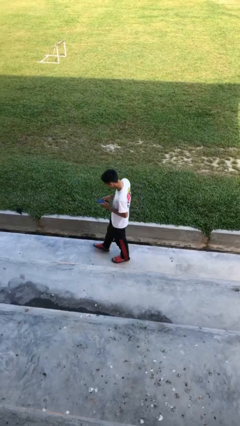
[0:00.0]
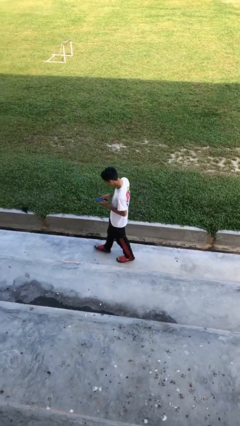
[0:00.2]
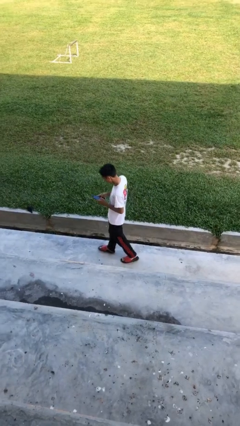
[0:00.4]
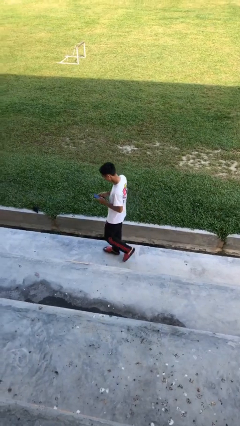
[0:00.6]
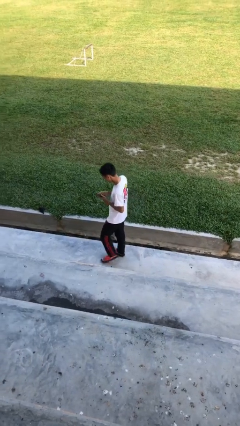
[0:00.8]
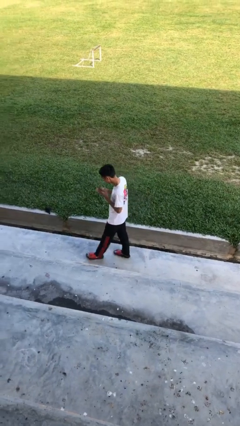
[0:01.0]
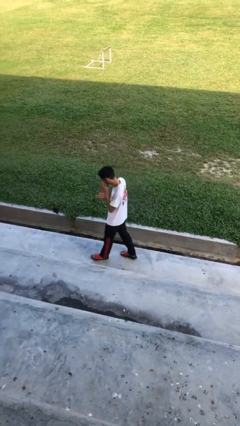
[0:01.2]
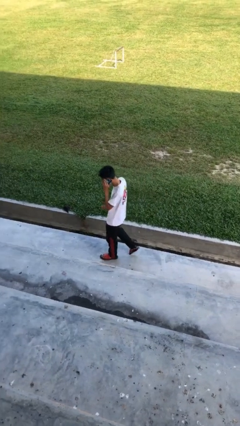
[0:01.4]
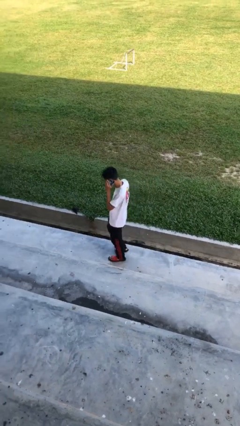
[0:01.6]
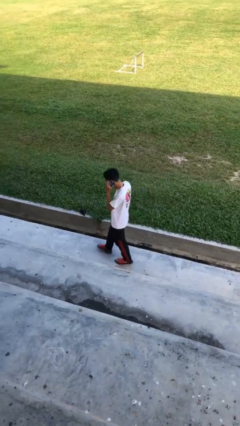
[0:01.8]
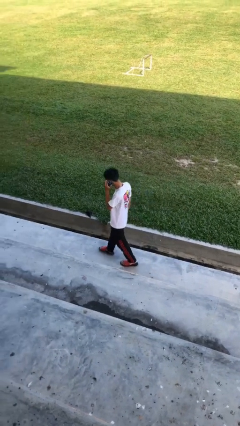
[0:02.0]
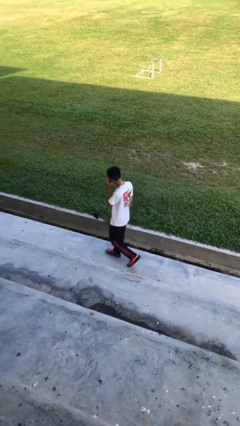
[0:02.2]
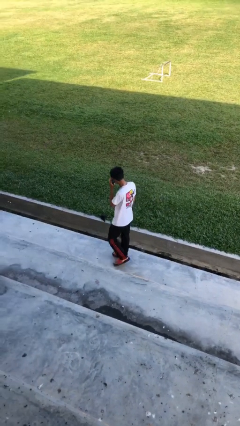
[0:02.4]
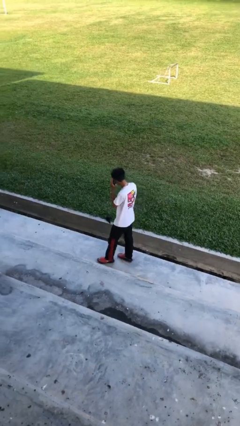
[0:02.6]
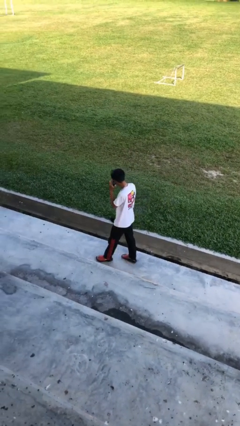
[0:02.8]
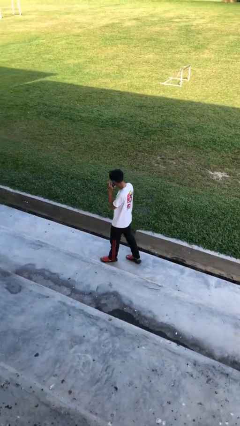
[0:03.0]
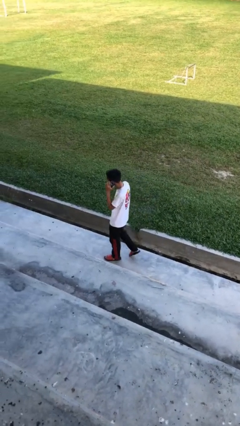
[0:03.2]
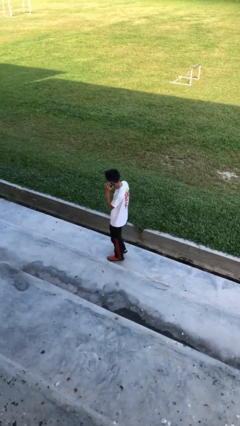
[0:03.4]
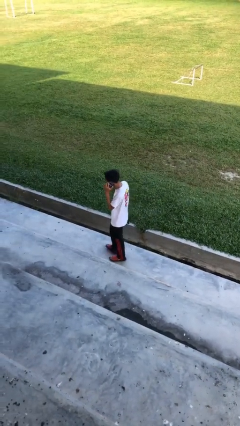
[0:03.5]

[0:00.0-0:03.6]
person talks on phone

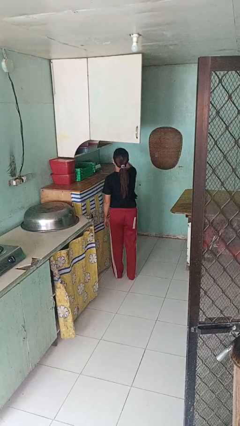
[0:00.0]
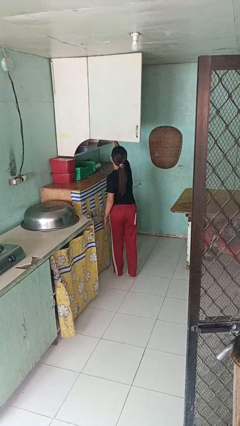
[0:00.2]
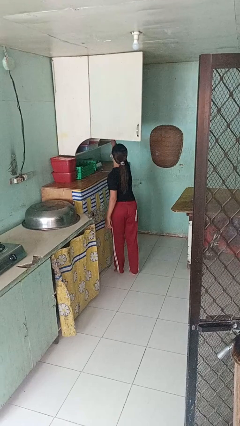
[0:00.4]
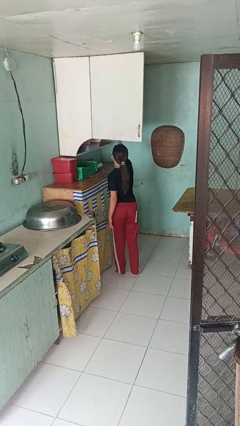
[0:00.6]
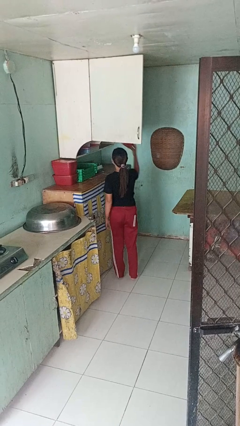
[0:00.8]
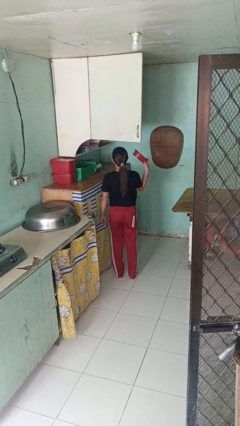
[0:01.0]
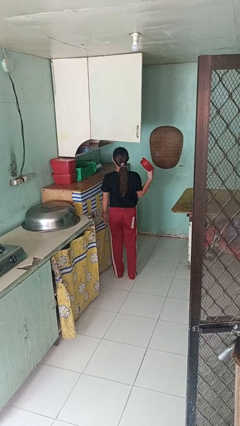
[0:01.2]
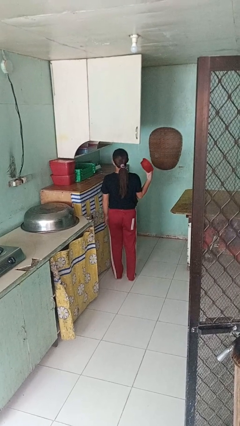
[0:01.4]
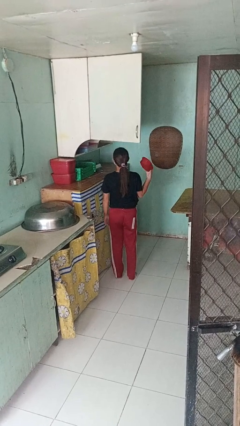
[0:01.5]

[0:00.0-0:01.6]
person takes object from cabinet

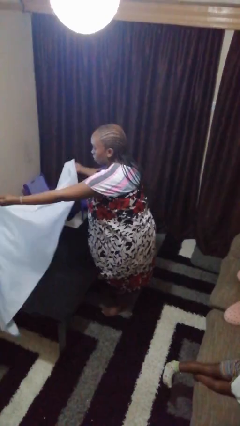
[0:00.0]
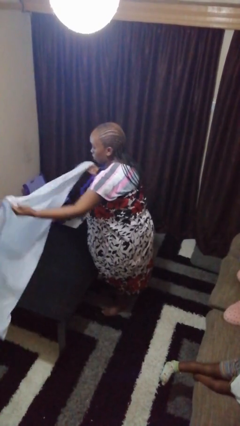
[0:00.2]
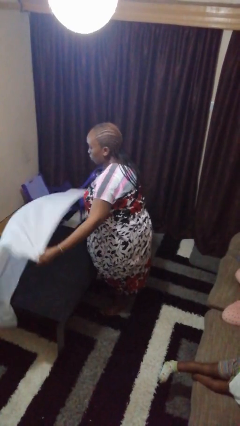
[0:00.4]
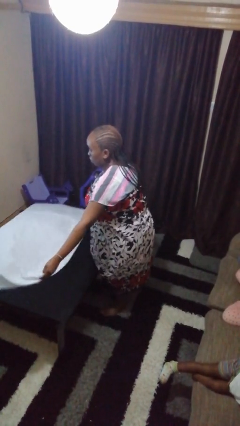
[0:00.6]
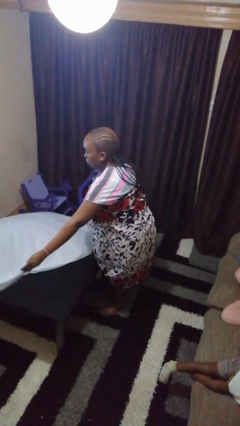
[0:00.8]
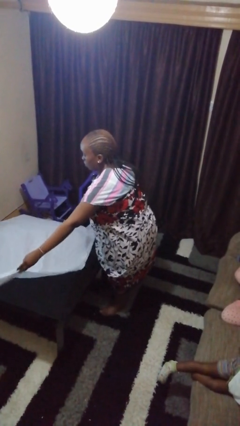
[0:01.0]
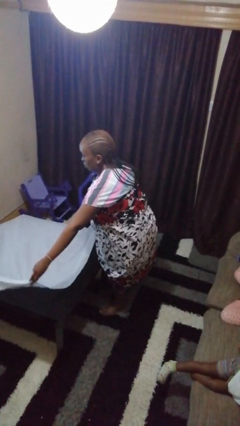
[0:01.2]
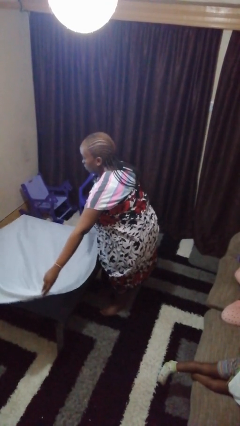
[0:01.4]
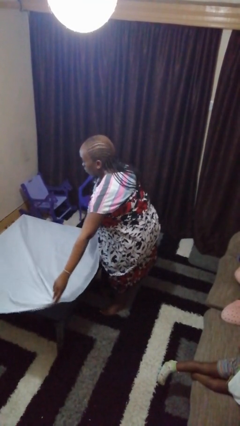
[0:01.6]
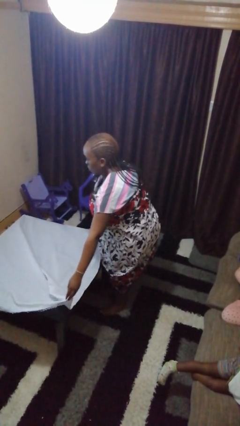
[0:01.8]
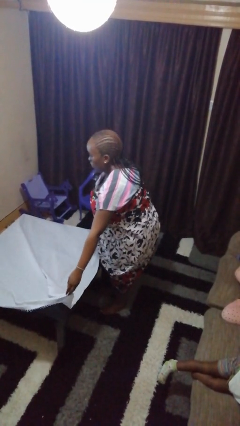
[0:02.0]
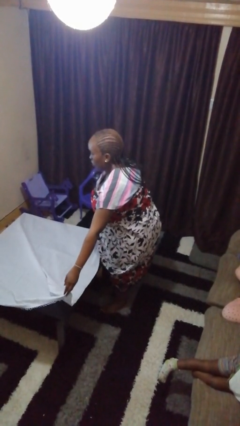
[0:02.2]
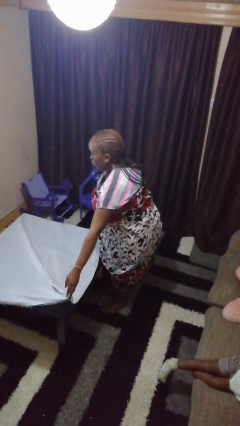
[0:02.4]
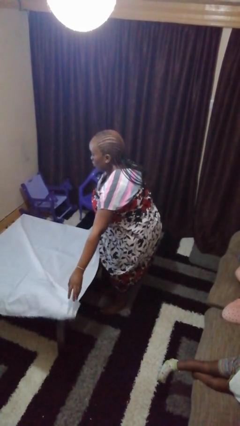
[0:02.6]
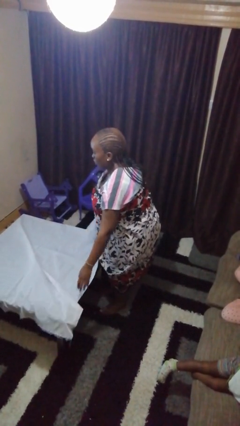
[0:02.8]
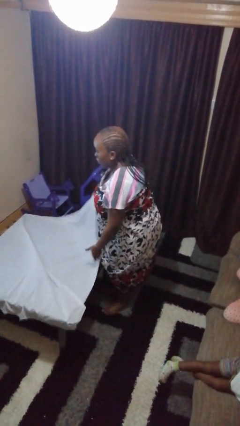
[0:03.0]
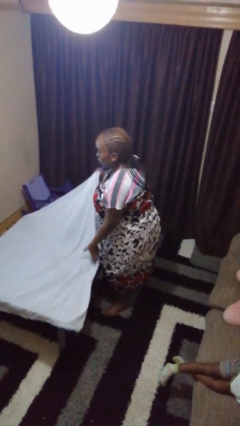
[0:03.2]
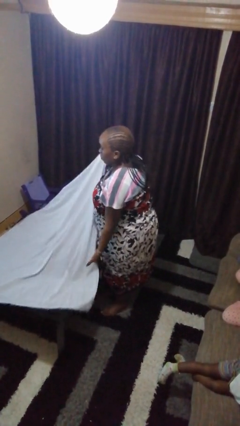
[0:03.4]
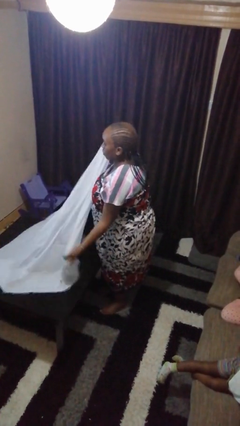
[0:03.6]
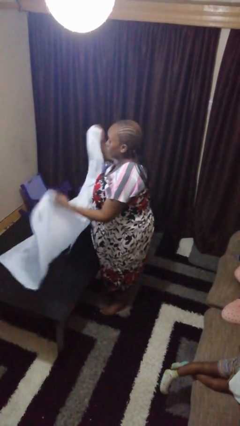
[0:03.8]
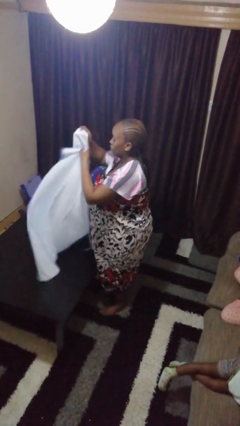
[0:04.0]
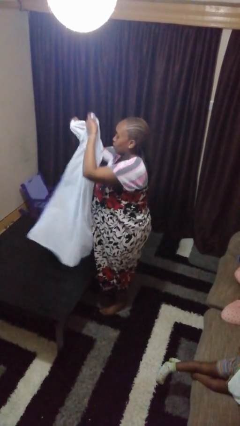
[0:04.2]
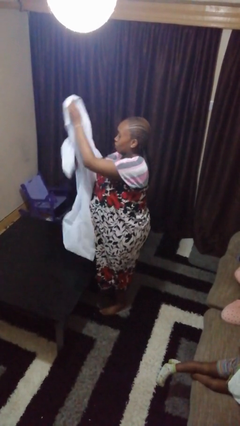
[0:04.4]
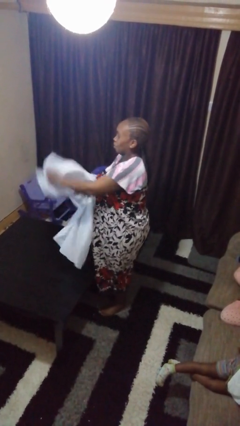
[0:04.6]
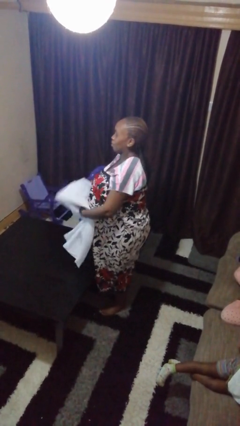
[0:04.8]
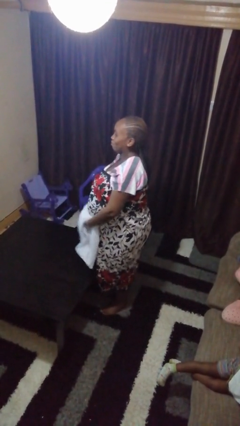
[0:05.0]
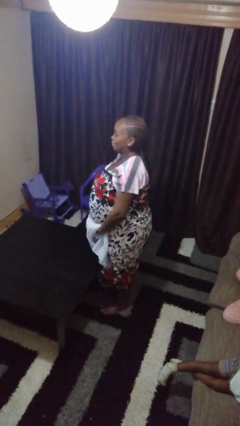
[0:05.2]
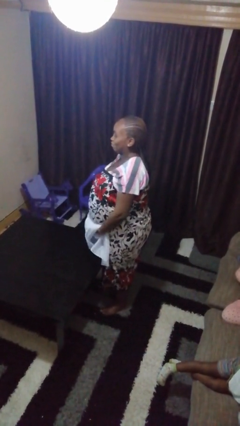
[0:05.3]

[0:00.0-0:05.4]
person folds tablecloth

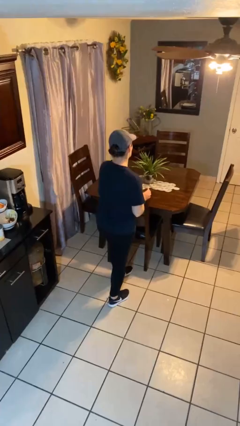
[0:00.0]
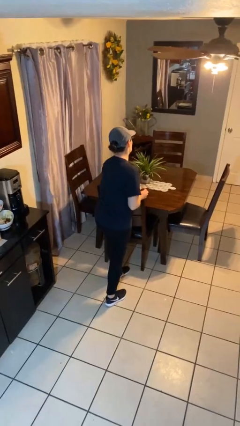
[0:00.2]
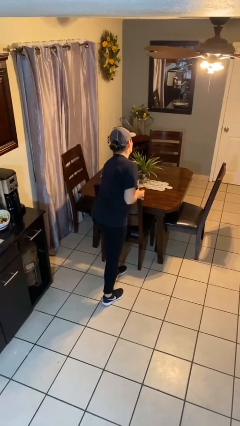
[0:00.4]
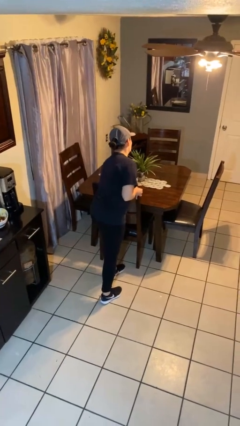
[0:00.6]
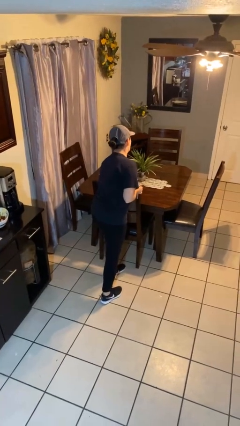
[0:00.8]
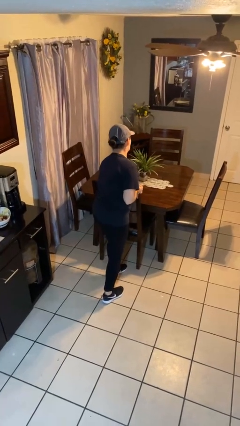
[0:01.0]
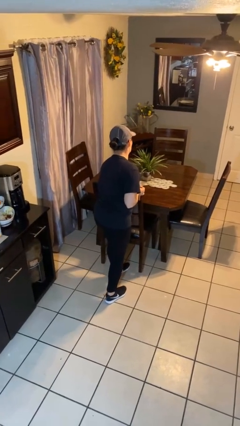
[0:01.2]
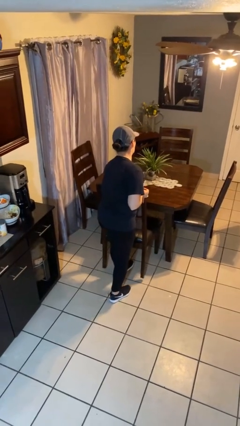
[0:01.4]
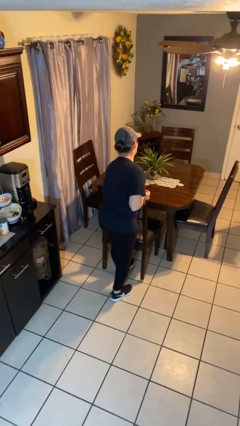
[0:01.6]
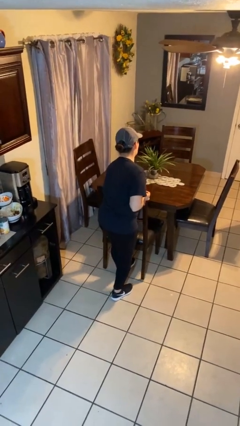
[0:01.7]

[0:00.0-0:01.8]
person pulls out chair

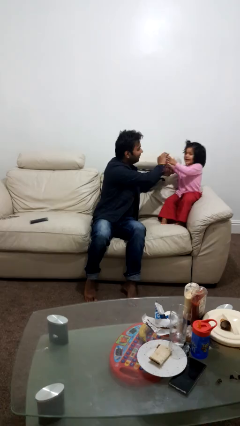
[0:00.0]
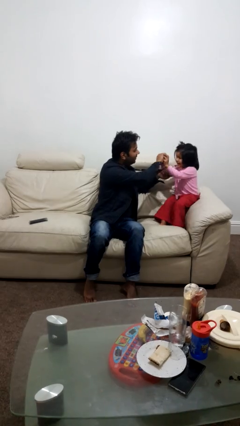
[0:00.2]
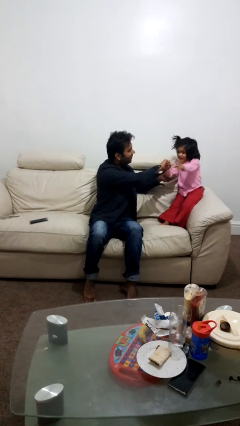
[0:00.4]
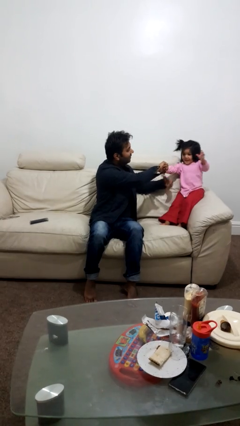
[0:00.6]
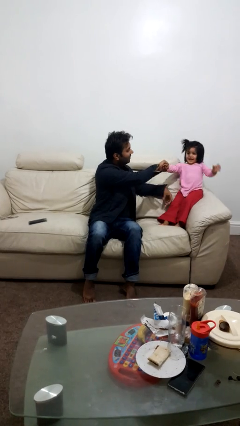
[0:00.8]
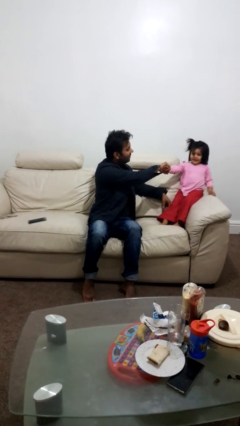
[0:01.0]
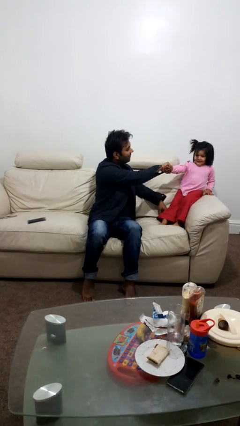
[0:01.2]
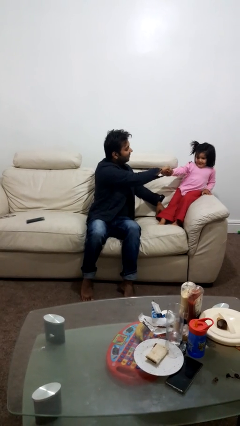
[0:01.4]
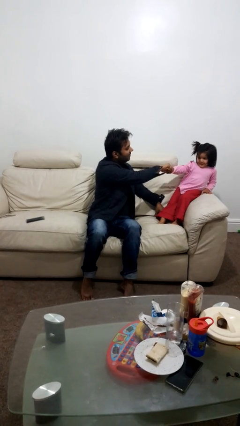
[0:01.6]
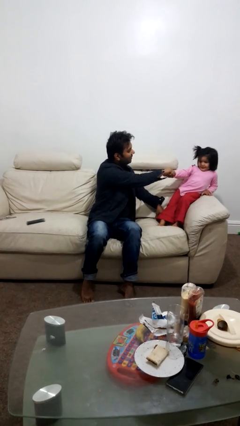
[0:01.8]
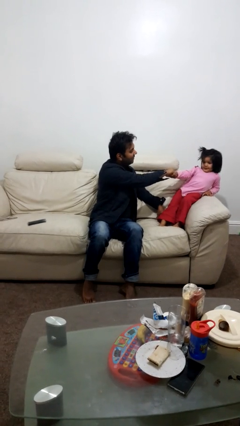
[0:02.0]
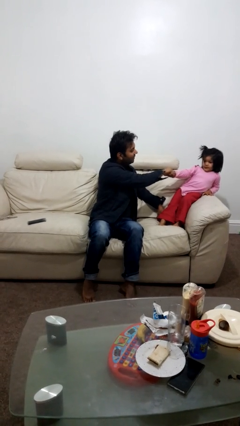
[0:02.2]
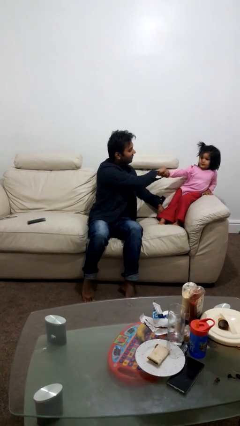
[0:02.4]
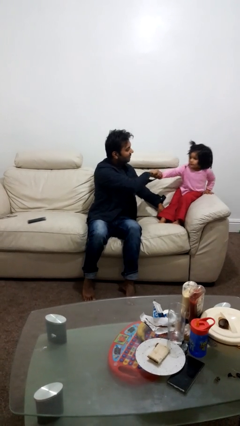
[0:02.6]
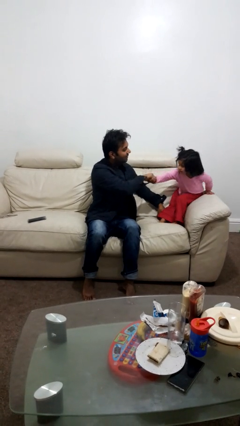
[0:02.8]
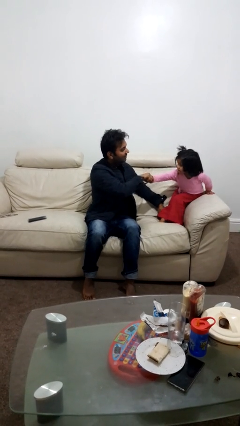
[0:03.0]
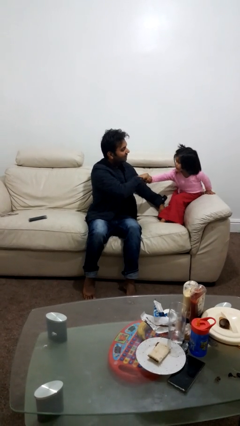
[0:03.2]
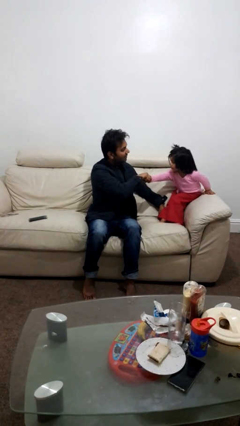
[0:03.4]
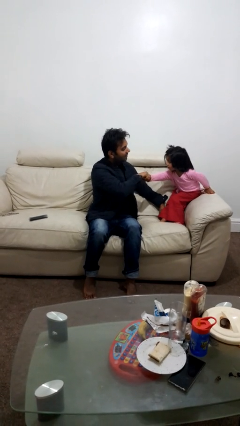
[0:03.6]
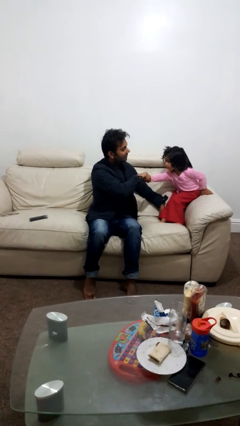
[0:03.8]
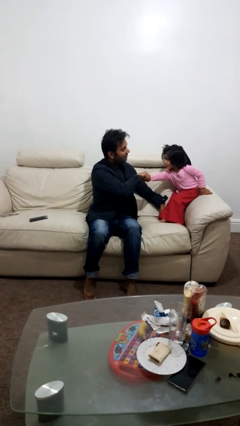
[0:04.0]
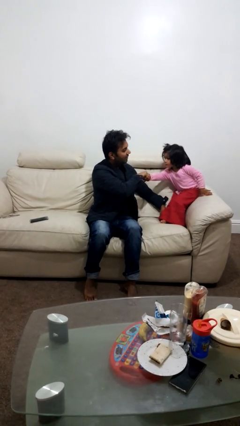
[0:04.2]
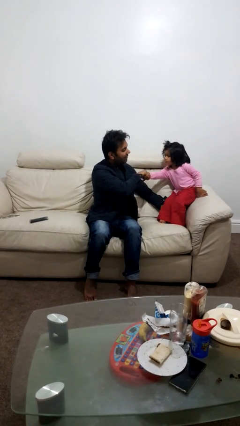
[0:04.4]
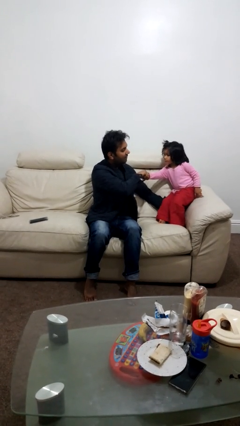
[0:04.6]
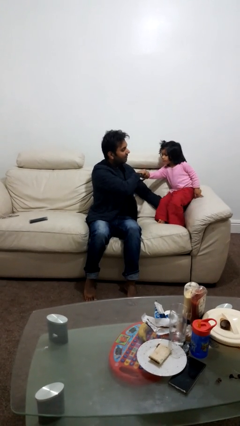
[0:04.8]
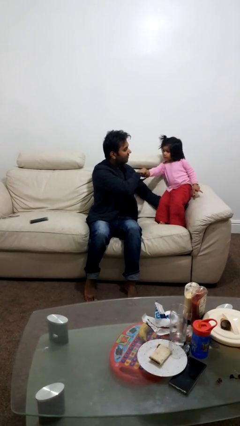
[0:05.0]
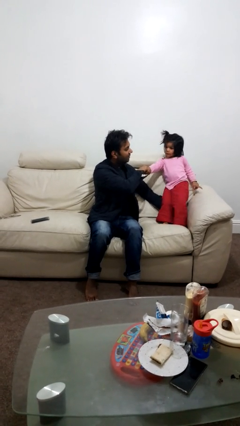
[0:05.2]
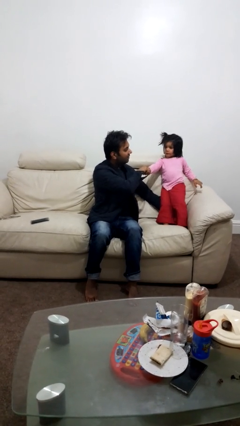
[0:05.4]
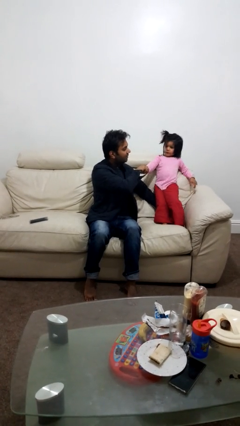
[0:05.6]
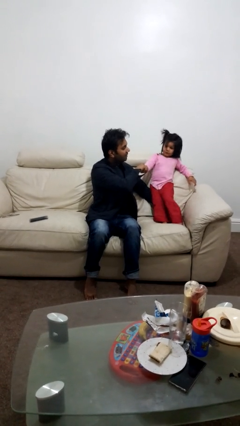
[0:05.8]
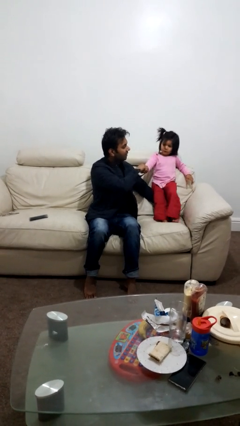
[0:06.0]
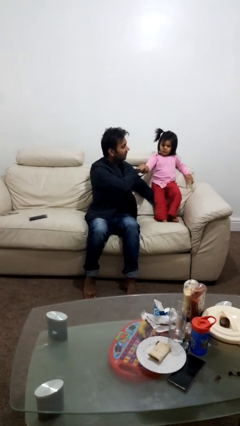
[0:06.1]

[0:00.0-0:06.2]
person highfives hand
